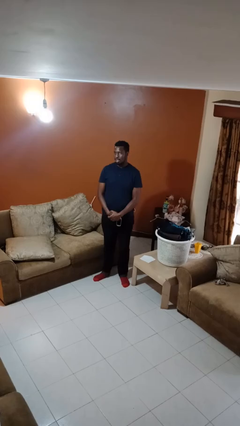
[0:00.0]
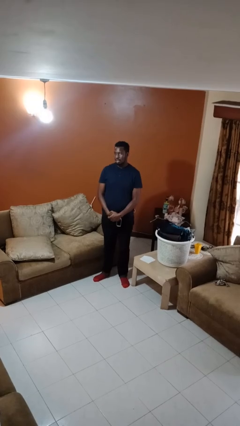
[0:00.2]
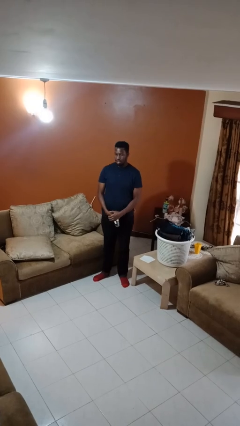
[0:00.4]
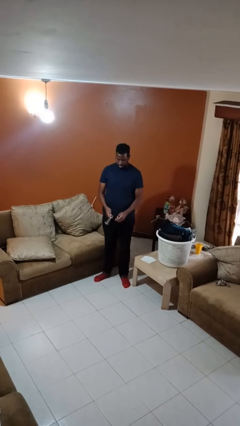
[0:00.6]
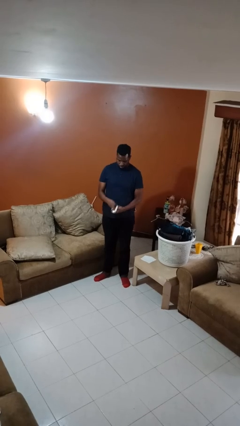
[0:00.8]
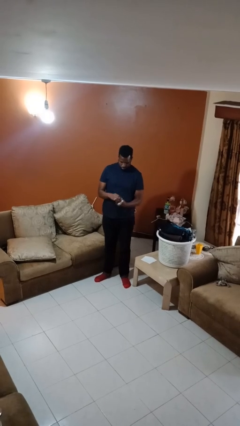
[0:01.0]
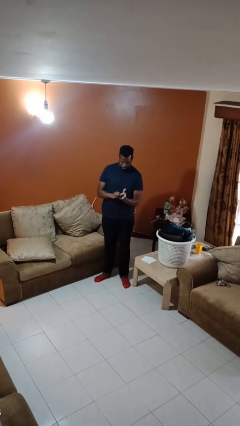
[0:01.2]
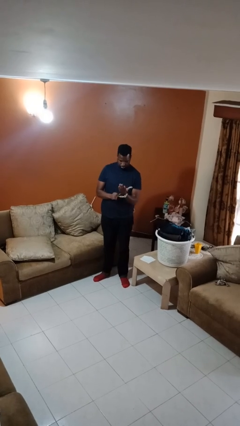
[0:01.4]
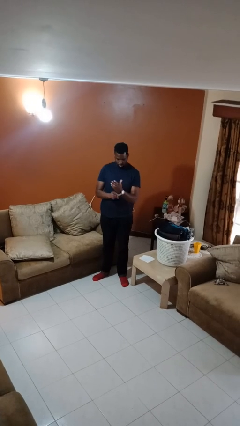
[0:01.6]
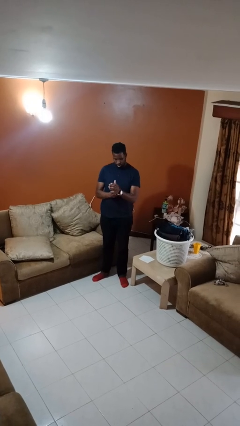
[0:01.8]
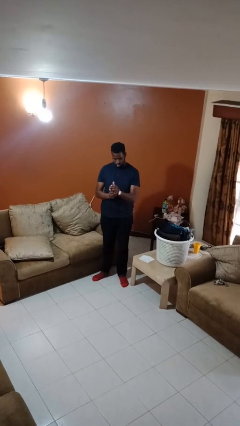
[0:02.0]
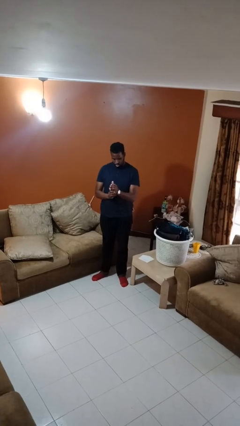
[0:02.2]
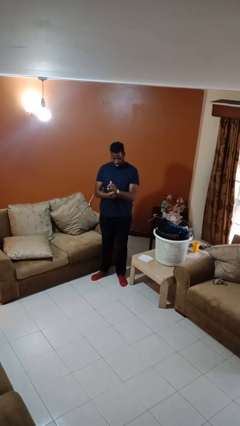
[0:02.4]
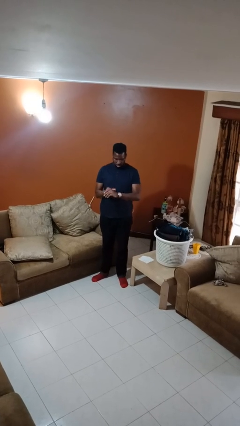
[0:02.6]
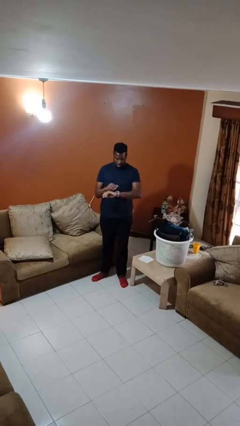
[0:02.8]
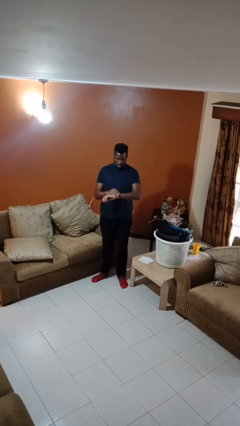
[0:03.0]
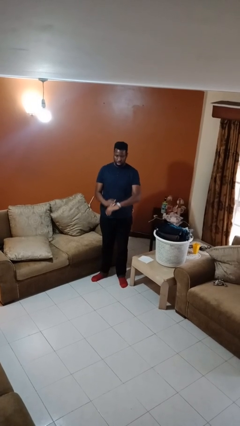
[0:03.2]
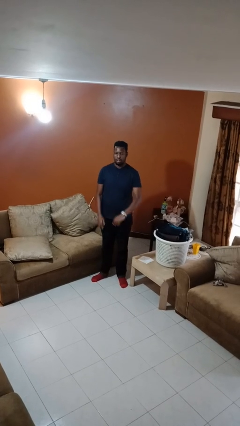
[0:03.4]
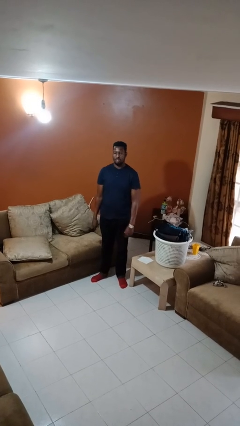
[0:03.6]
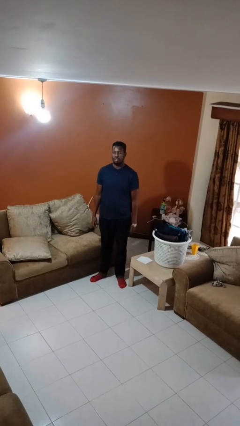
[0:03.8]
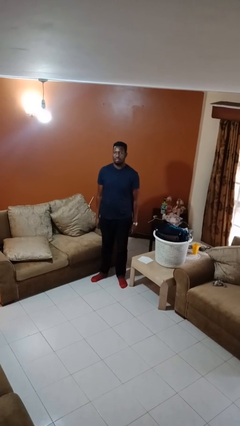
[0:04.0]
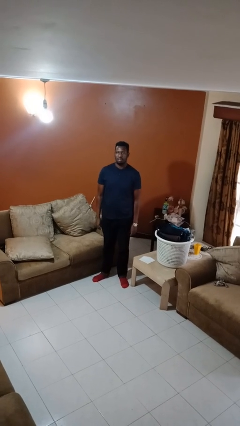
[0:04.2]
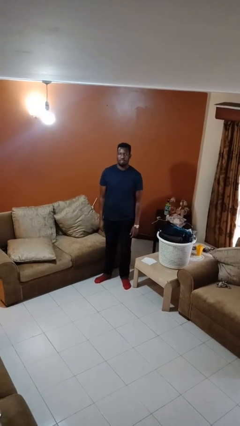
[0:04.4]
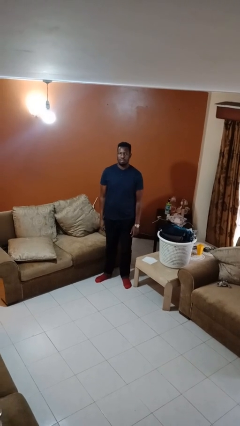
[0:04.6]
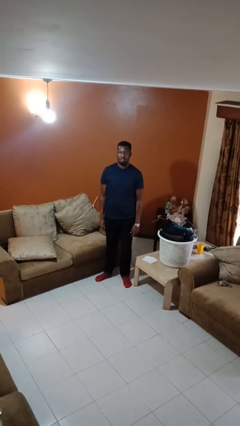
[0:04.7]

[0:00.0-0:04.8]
person puts on wristwatch

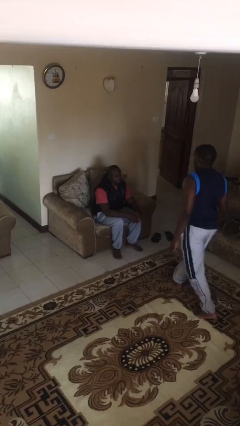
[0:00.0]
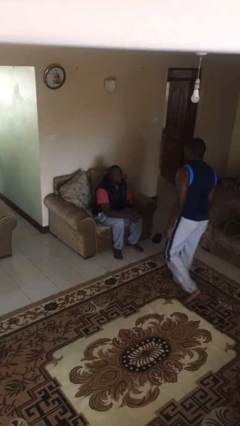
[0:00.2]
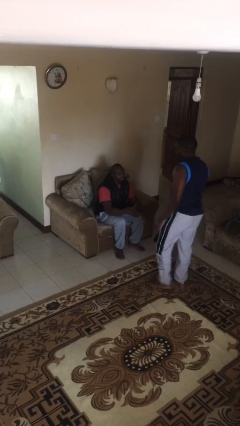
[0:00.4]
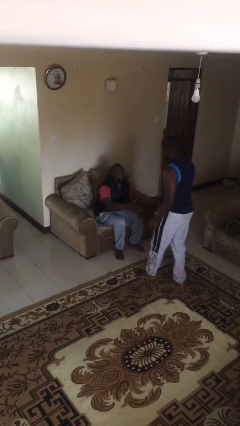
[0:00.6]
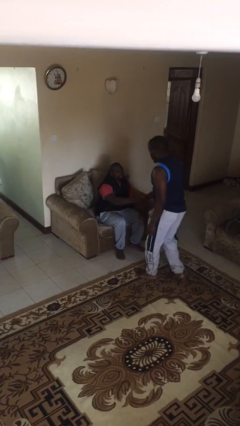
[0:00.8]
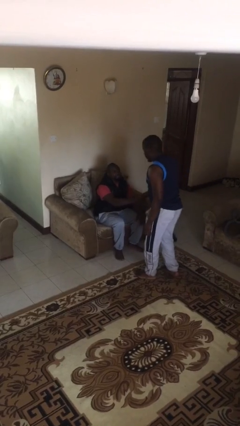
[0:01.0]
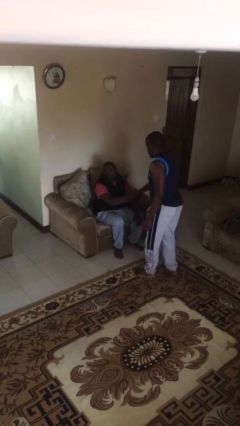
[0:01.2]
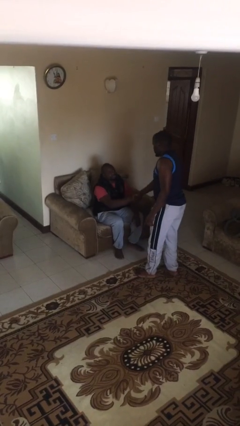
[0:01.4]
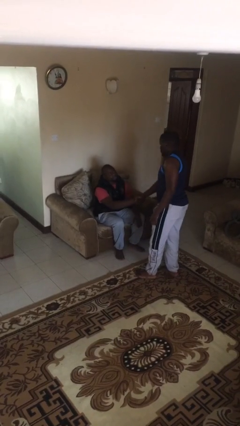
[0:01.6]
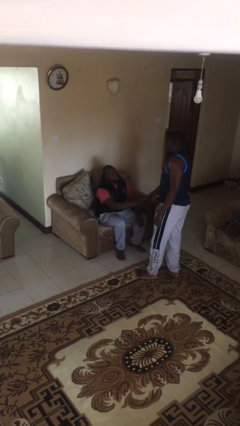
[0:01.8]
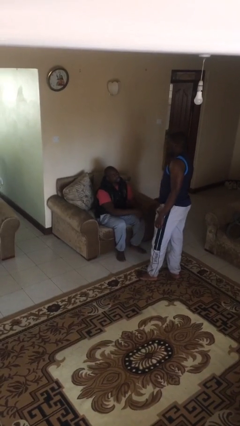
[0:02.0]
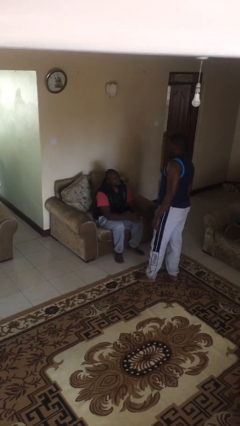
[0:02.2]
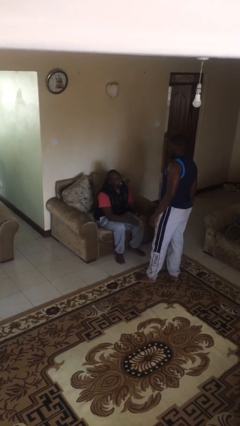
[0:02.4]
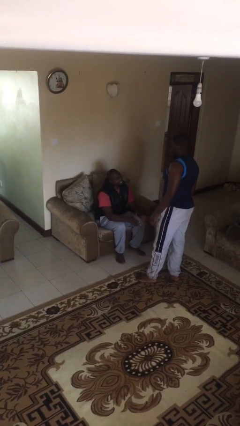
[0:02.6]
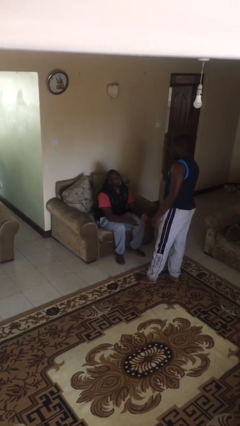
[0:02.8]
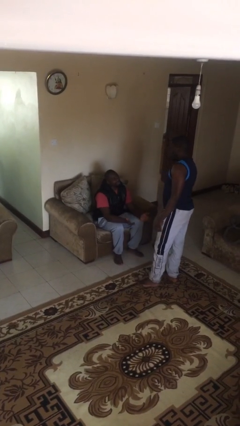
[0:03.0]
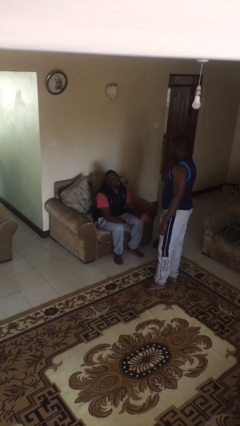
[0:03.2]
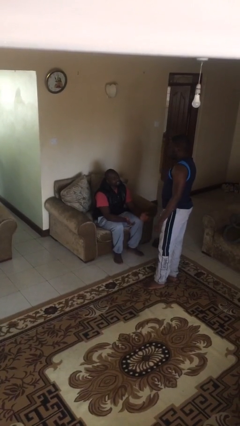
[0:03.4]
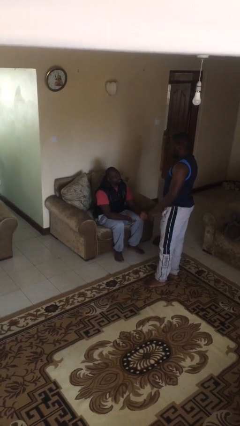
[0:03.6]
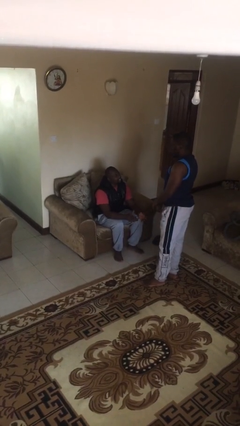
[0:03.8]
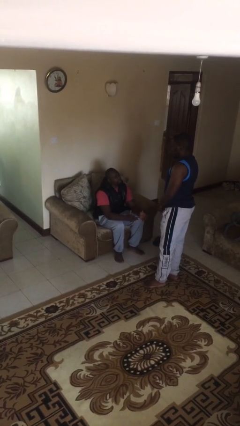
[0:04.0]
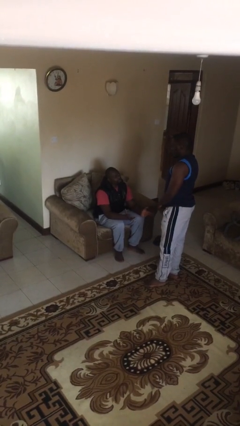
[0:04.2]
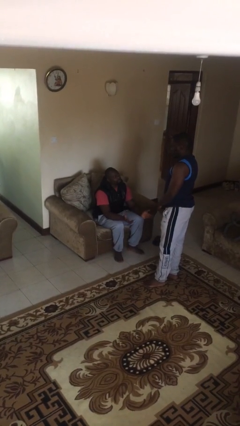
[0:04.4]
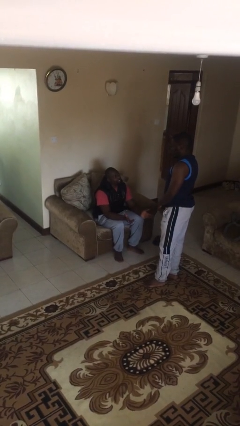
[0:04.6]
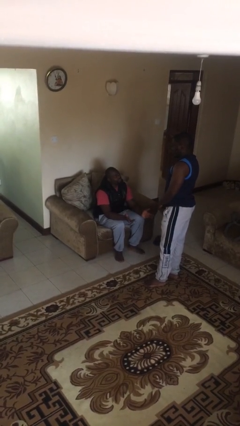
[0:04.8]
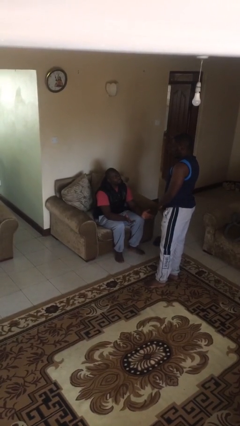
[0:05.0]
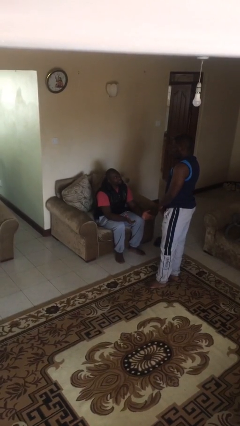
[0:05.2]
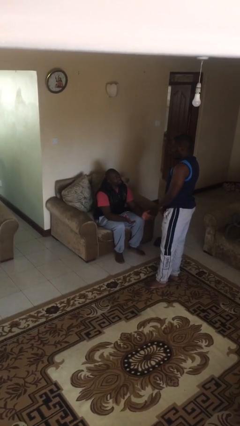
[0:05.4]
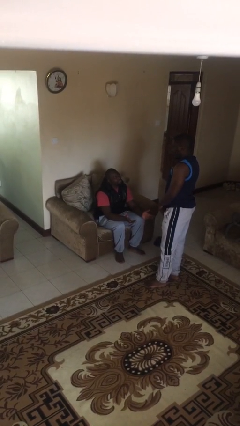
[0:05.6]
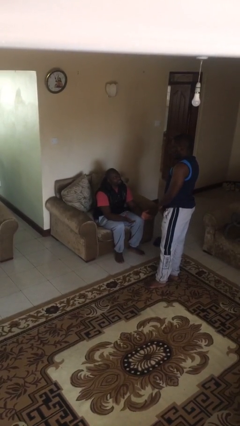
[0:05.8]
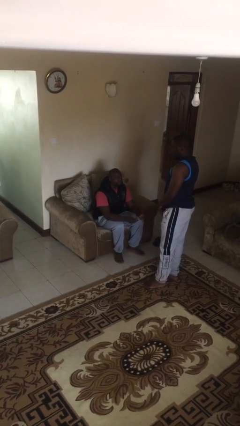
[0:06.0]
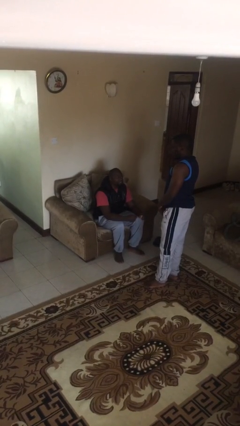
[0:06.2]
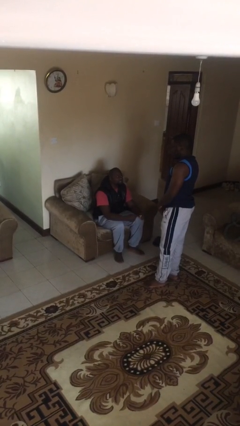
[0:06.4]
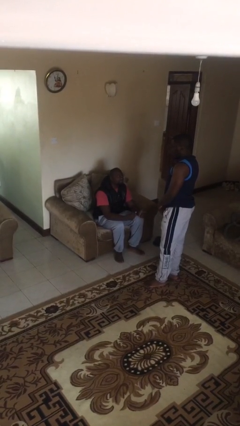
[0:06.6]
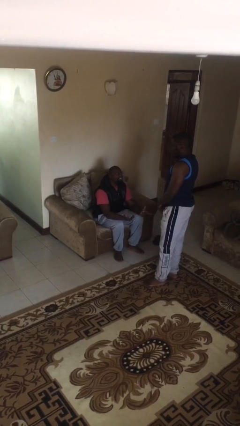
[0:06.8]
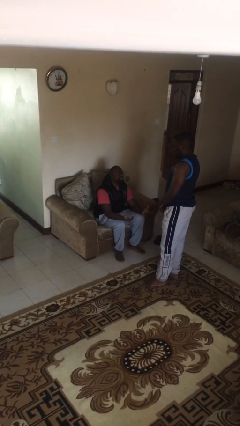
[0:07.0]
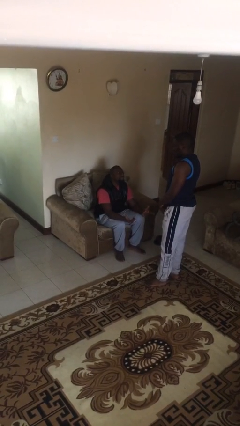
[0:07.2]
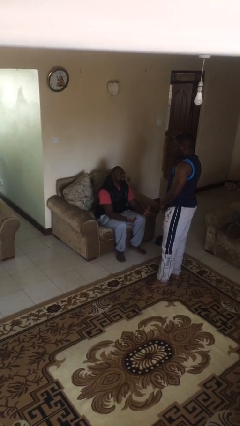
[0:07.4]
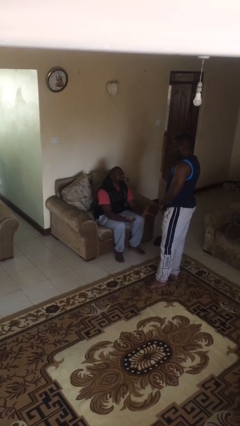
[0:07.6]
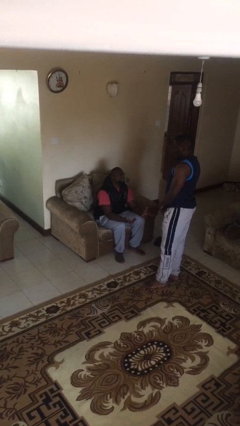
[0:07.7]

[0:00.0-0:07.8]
person shakes hand

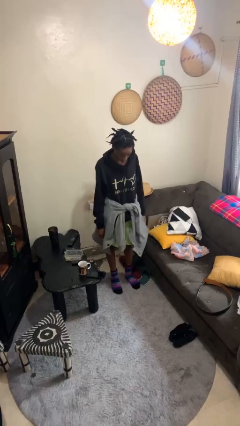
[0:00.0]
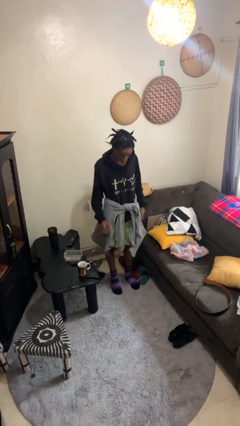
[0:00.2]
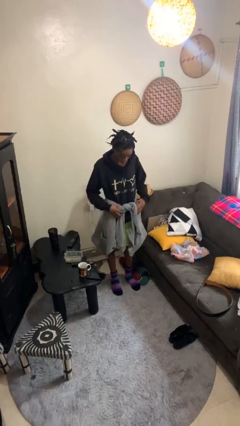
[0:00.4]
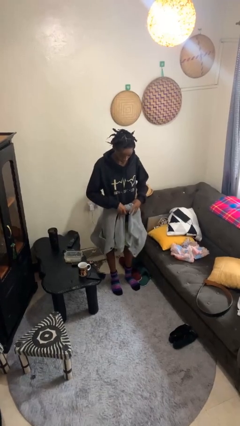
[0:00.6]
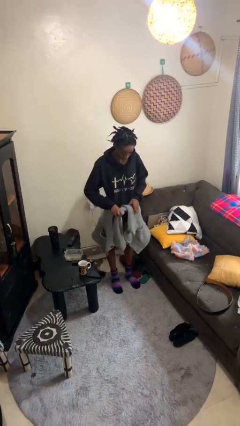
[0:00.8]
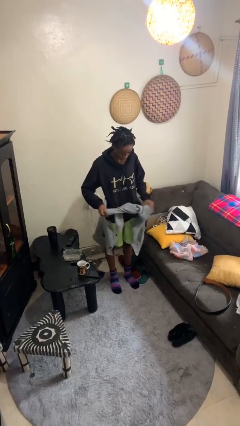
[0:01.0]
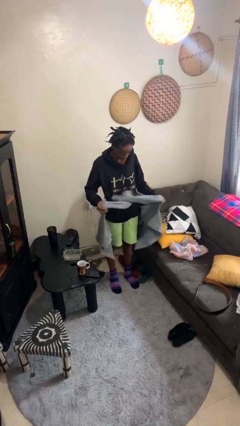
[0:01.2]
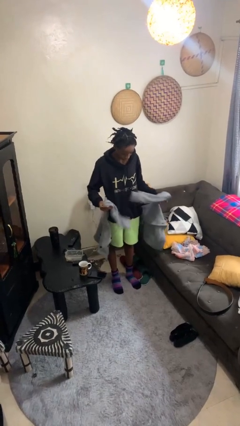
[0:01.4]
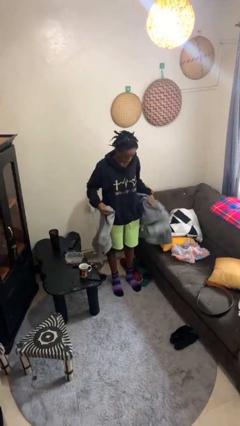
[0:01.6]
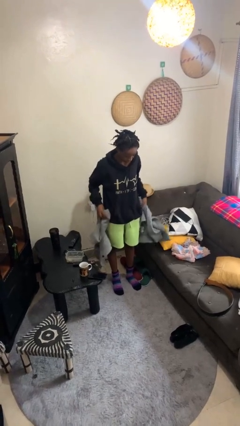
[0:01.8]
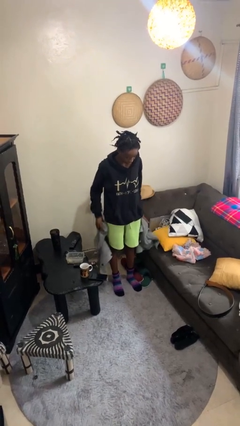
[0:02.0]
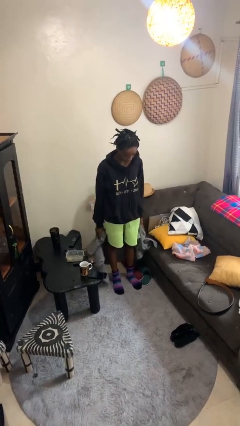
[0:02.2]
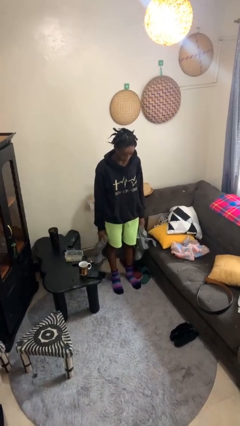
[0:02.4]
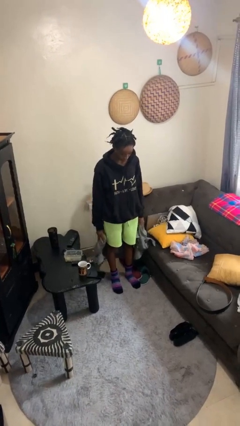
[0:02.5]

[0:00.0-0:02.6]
person unties jacket around waist

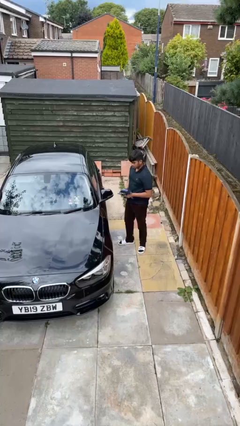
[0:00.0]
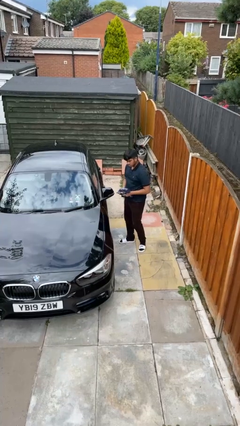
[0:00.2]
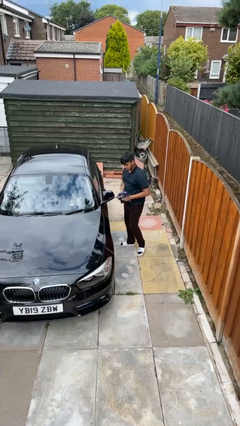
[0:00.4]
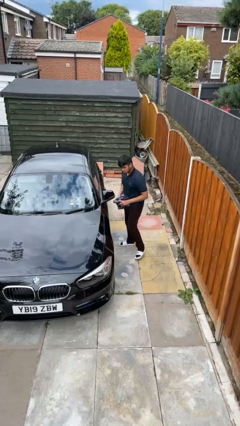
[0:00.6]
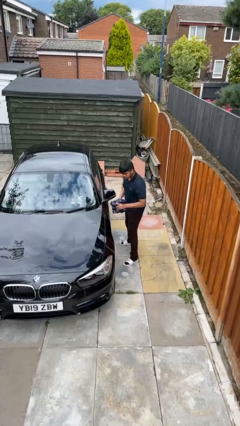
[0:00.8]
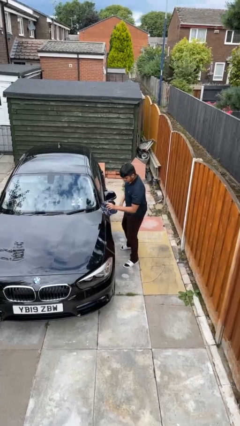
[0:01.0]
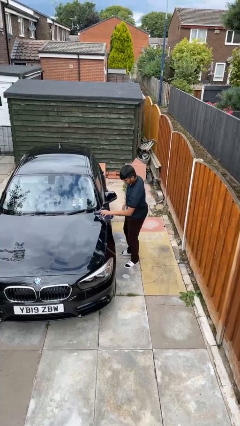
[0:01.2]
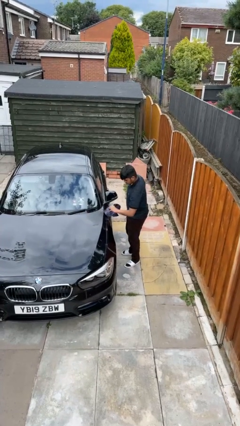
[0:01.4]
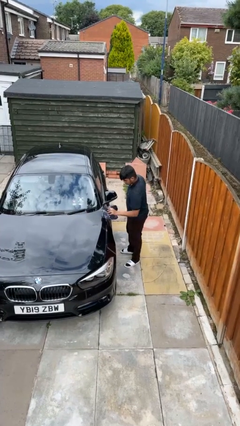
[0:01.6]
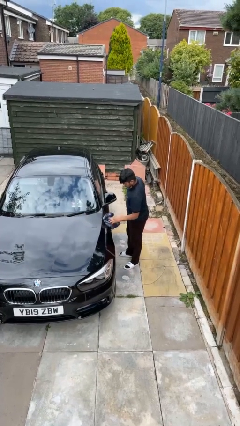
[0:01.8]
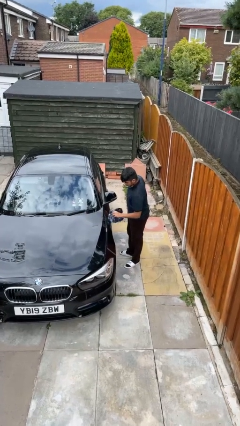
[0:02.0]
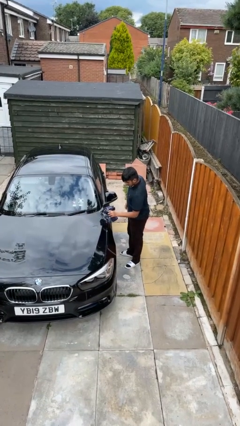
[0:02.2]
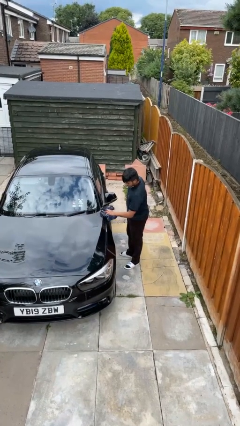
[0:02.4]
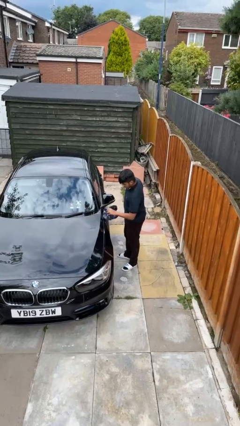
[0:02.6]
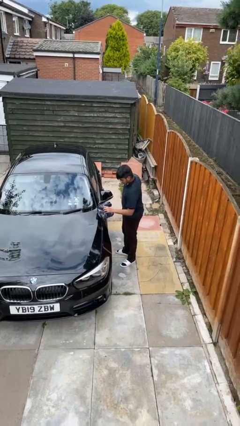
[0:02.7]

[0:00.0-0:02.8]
person polishes car with rag
